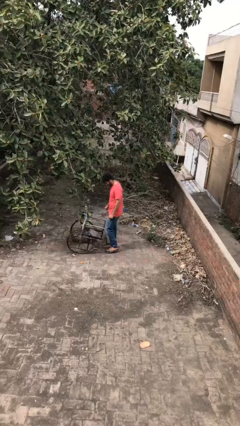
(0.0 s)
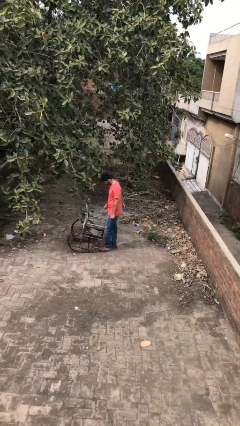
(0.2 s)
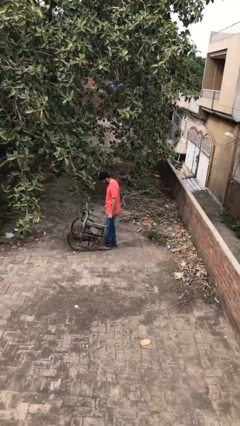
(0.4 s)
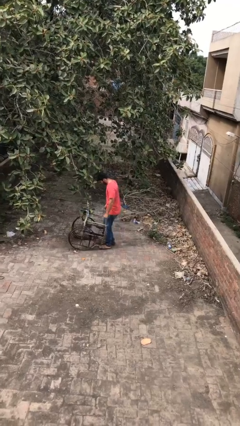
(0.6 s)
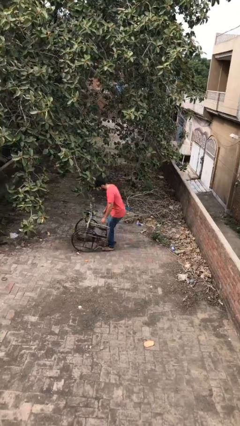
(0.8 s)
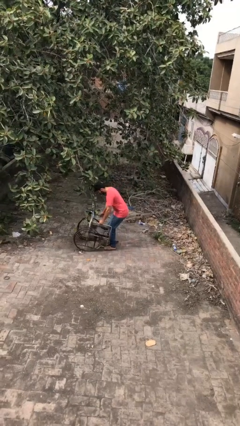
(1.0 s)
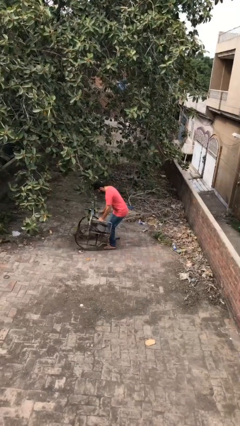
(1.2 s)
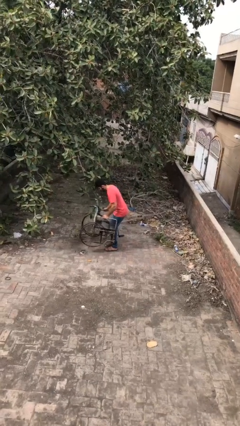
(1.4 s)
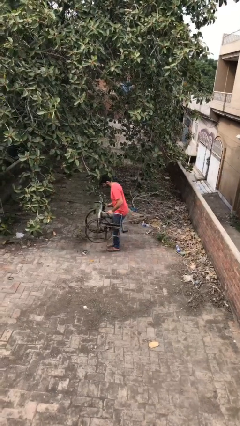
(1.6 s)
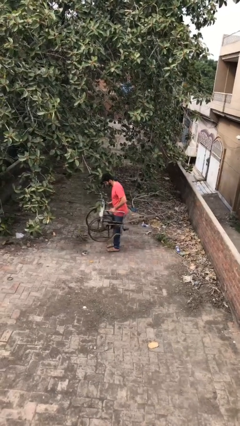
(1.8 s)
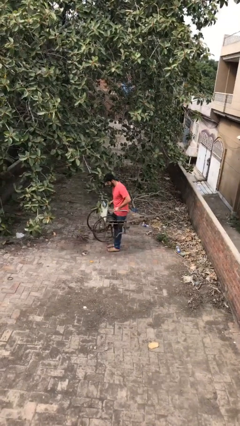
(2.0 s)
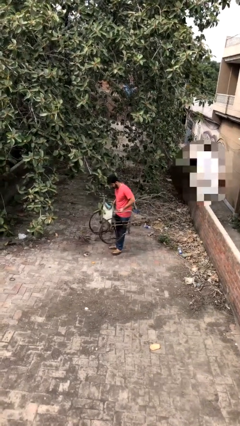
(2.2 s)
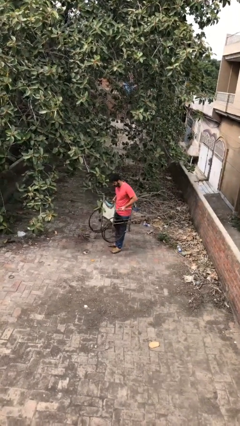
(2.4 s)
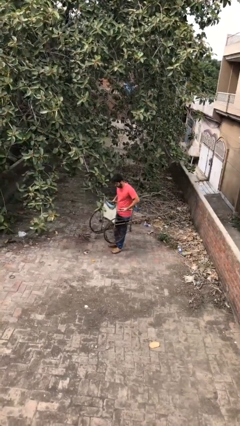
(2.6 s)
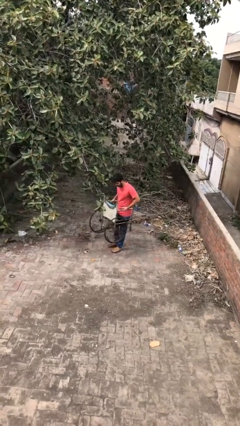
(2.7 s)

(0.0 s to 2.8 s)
person picks up object from floor

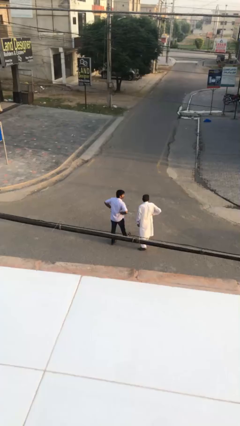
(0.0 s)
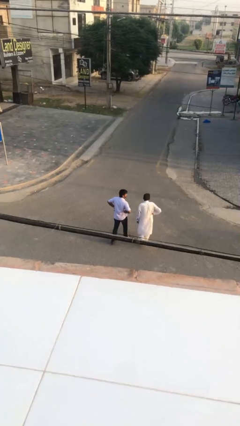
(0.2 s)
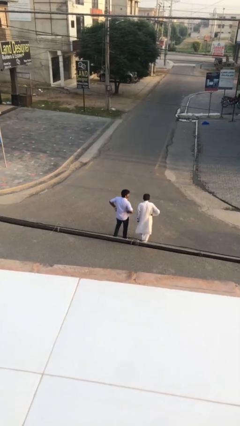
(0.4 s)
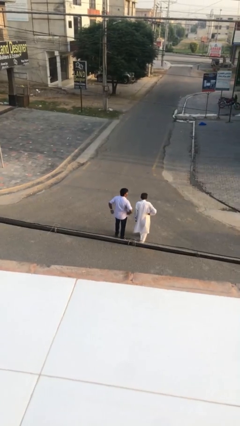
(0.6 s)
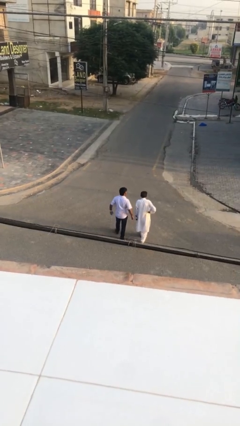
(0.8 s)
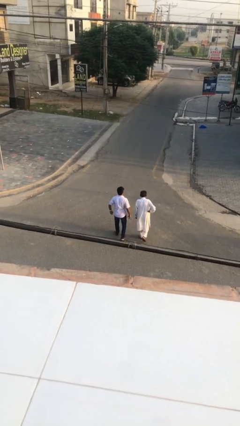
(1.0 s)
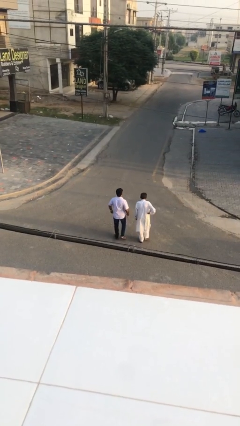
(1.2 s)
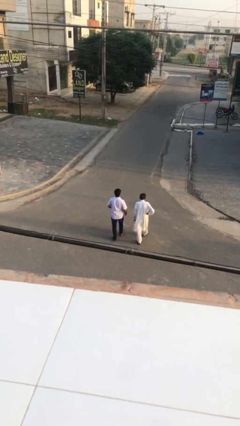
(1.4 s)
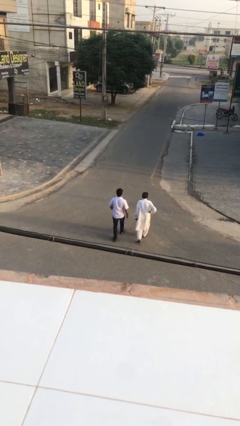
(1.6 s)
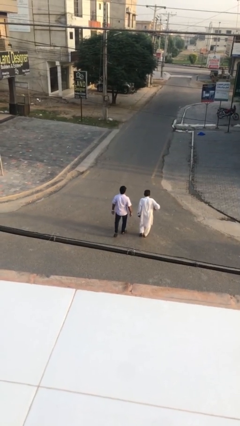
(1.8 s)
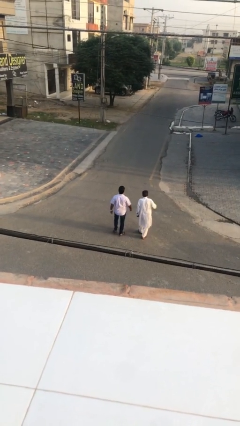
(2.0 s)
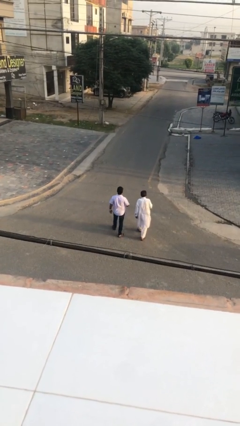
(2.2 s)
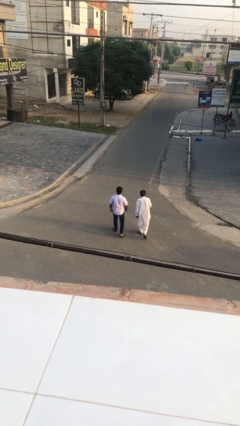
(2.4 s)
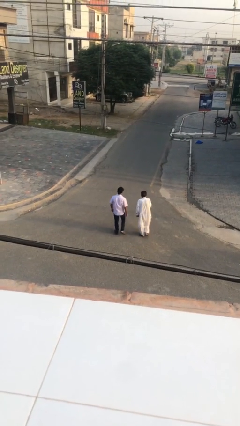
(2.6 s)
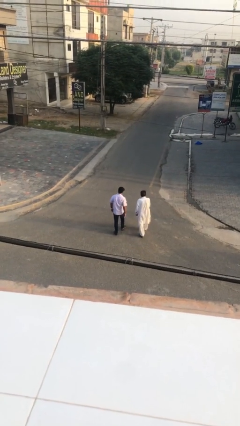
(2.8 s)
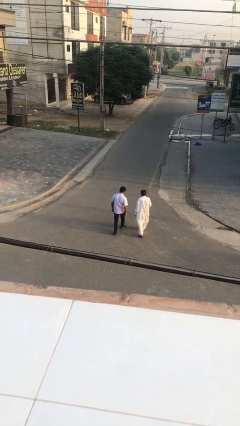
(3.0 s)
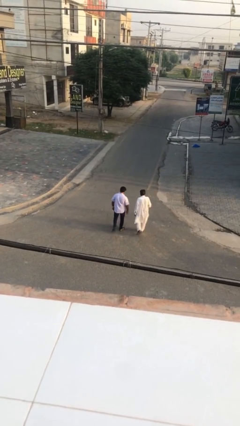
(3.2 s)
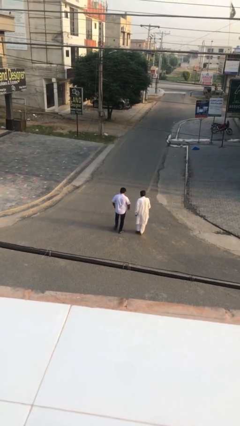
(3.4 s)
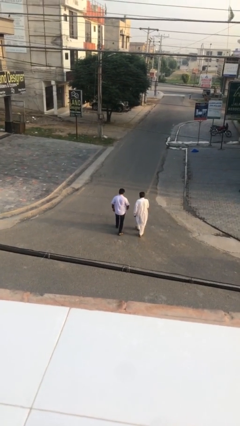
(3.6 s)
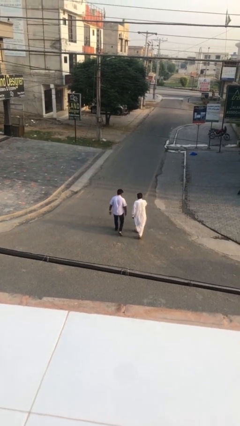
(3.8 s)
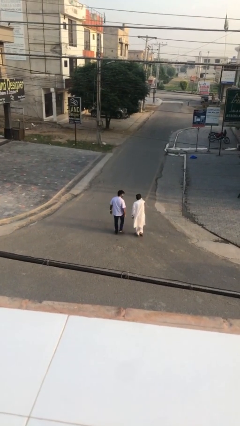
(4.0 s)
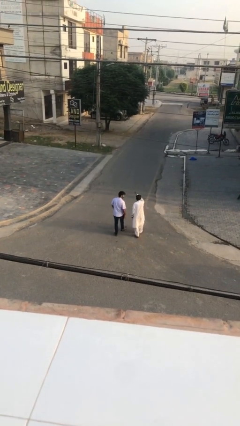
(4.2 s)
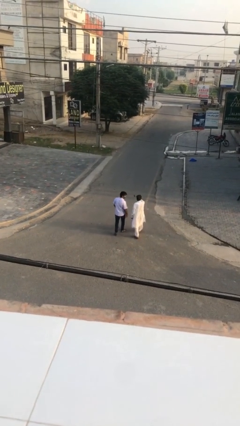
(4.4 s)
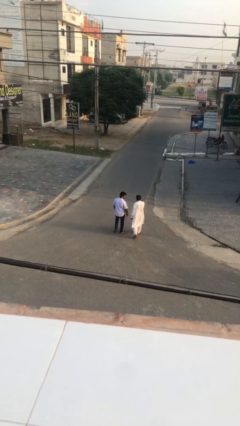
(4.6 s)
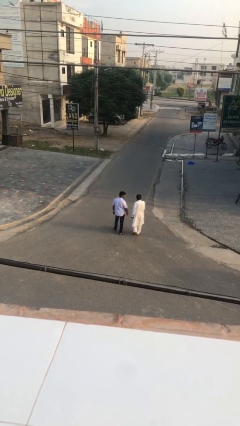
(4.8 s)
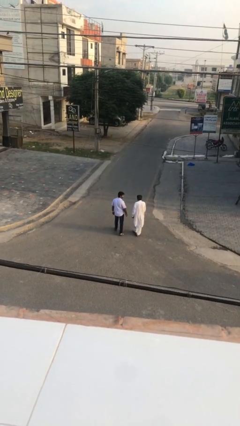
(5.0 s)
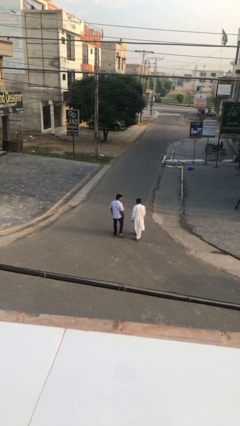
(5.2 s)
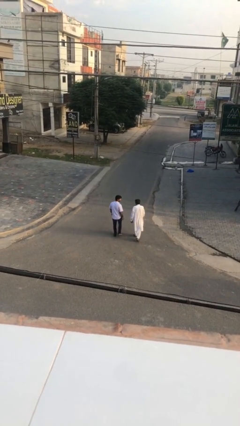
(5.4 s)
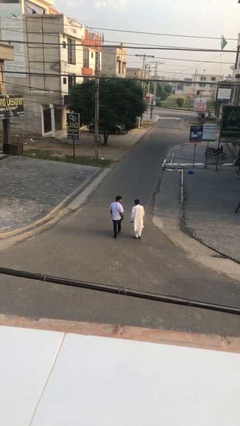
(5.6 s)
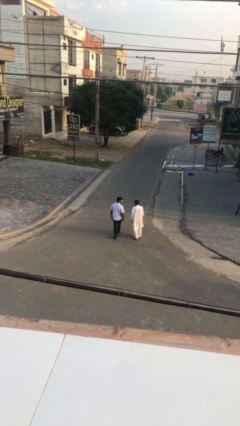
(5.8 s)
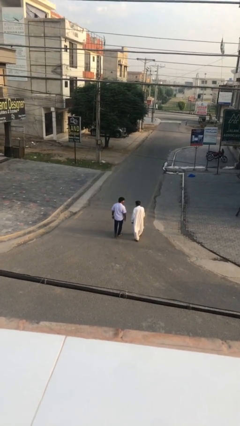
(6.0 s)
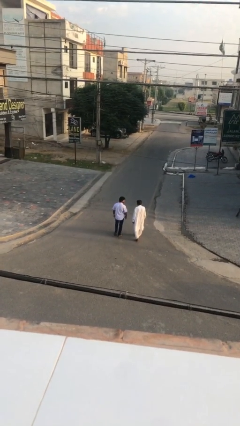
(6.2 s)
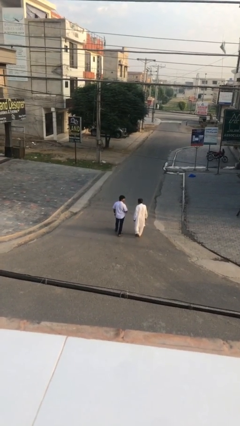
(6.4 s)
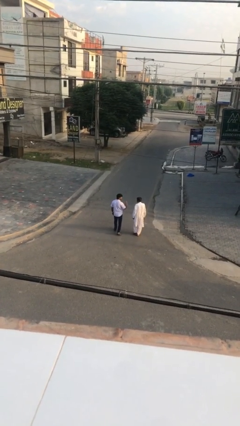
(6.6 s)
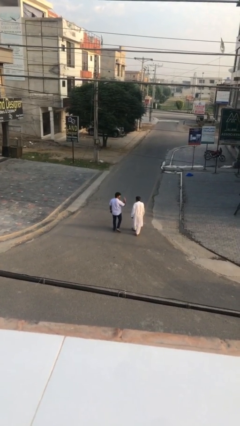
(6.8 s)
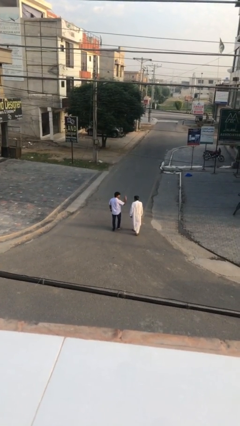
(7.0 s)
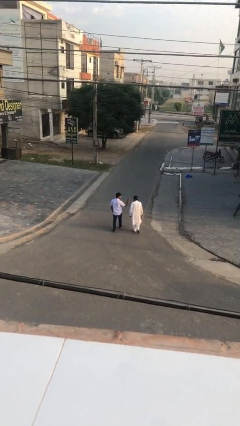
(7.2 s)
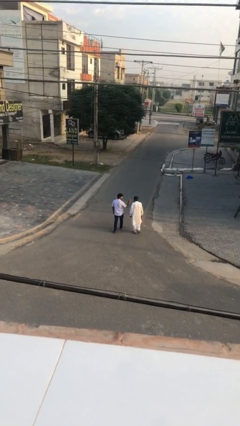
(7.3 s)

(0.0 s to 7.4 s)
person talks to person

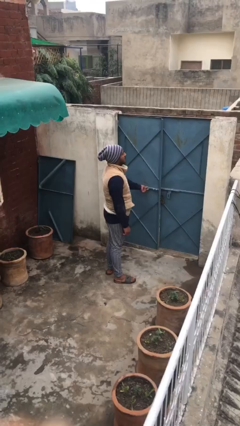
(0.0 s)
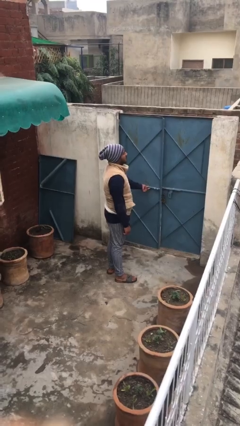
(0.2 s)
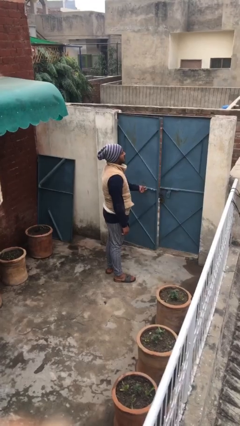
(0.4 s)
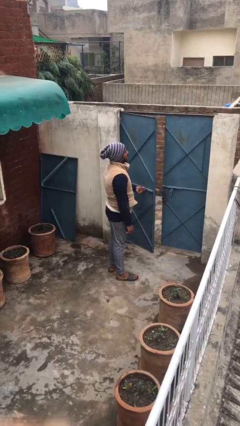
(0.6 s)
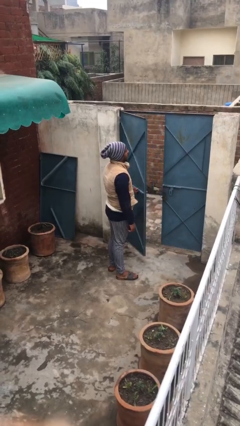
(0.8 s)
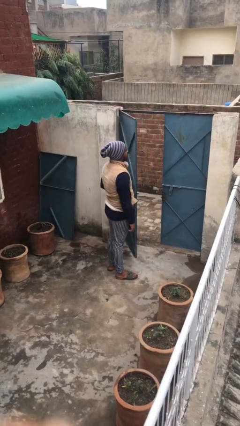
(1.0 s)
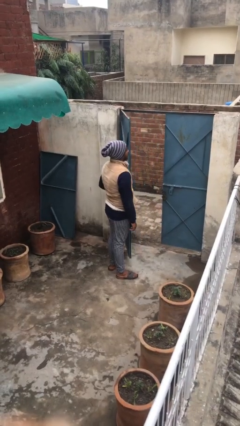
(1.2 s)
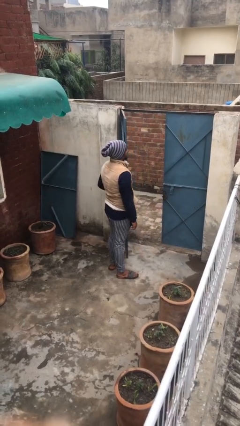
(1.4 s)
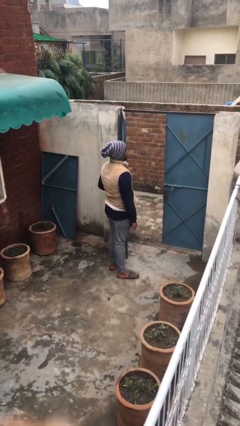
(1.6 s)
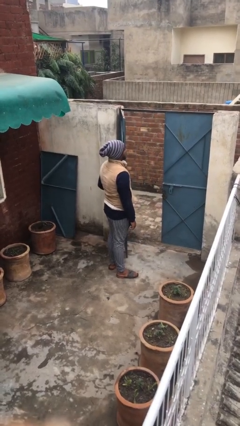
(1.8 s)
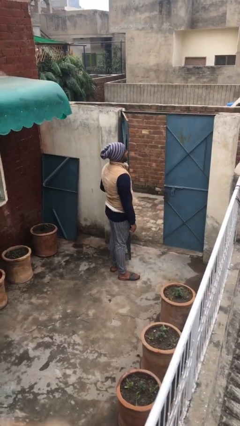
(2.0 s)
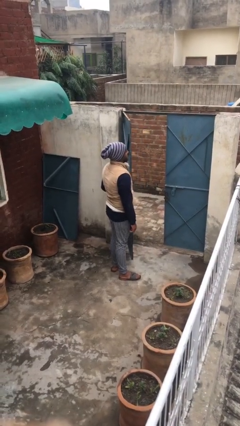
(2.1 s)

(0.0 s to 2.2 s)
person opens facility door

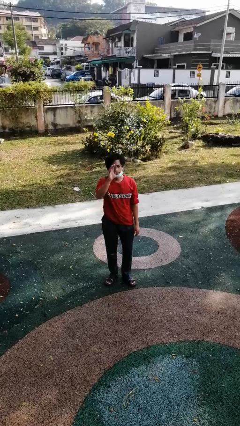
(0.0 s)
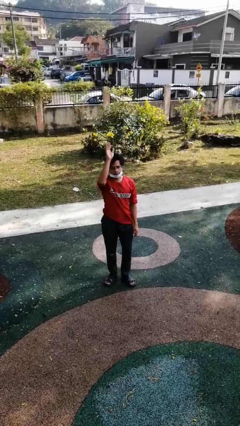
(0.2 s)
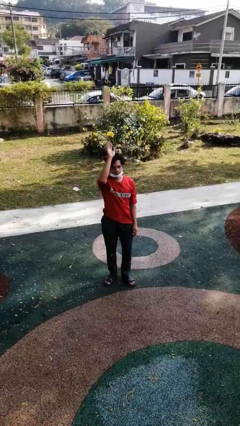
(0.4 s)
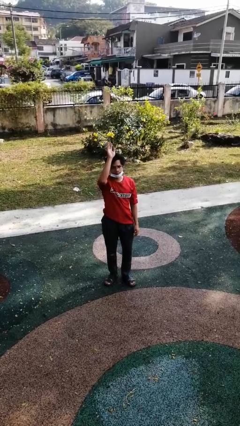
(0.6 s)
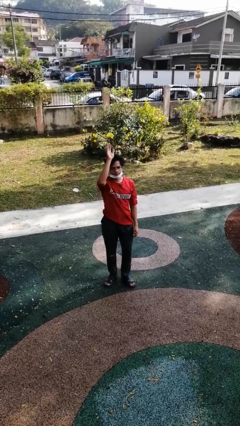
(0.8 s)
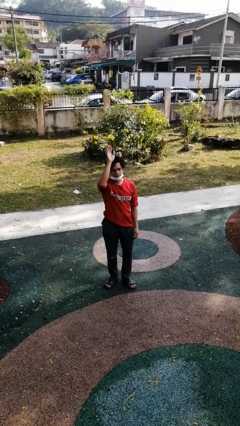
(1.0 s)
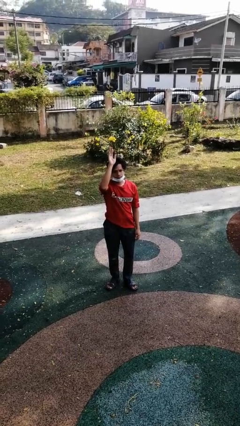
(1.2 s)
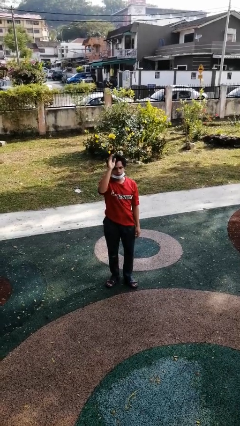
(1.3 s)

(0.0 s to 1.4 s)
person gestures raise hand

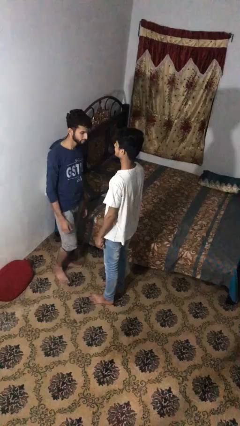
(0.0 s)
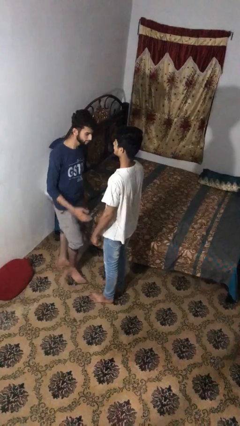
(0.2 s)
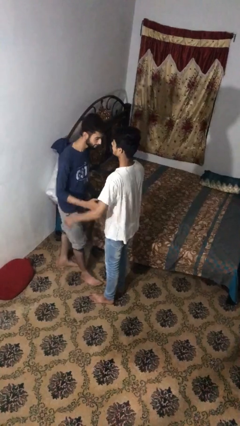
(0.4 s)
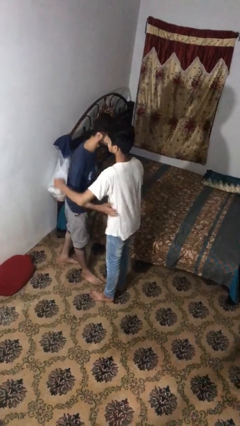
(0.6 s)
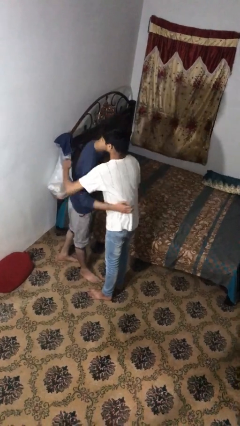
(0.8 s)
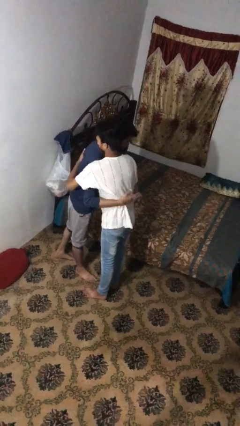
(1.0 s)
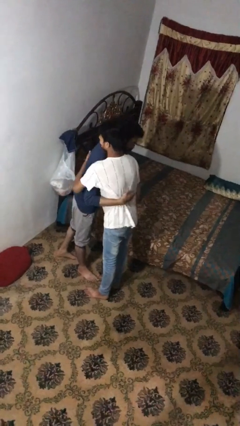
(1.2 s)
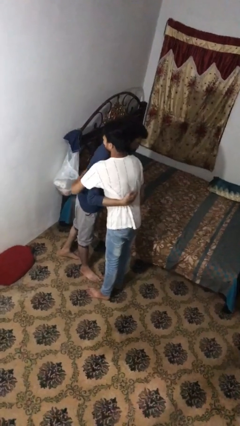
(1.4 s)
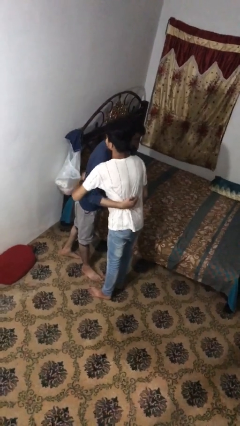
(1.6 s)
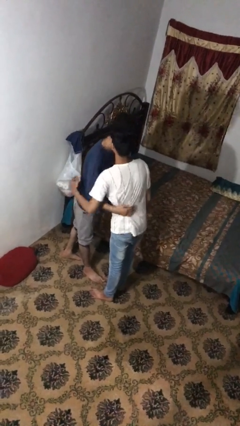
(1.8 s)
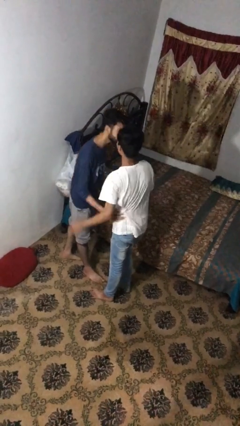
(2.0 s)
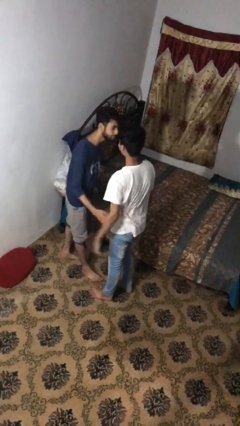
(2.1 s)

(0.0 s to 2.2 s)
person embraces person

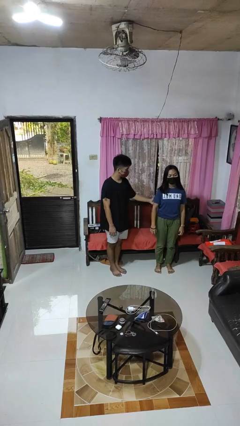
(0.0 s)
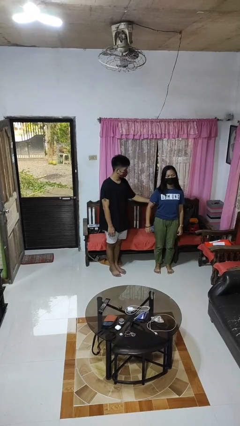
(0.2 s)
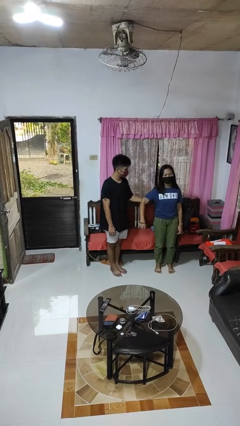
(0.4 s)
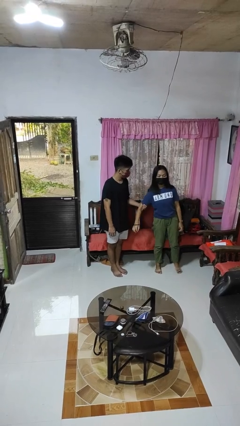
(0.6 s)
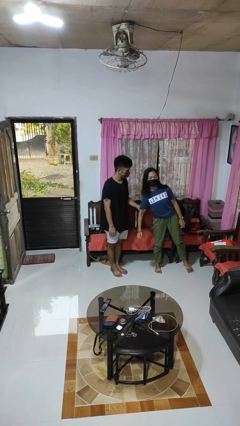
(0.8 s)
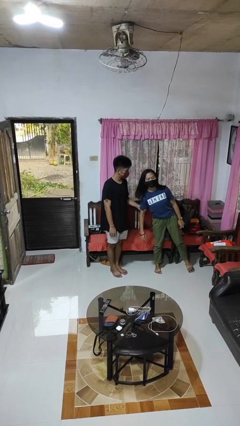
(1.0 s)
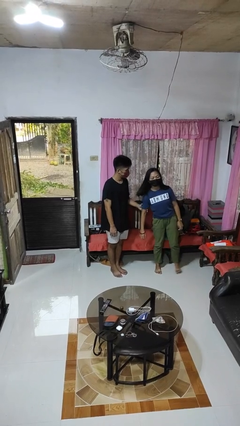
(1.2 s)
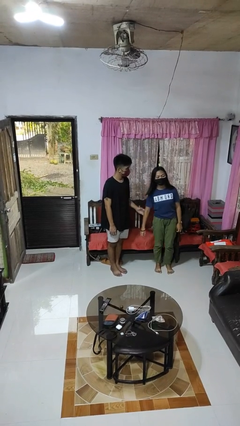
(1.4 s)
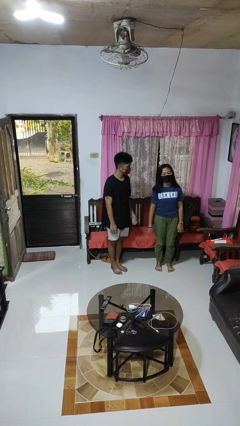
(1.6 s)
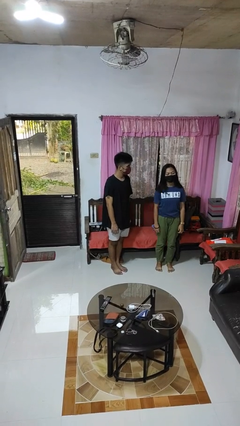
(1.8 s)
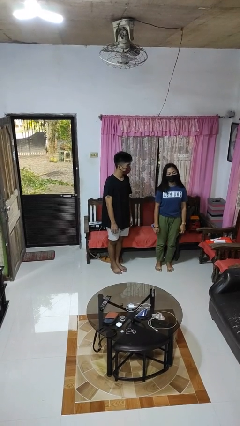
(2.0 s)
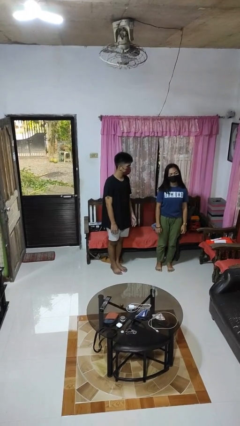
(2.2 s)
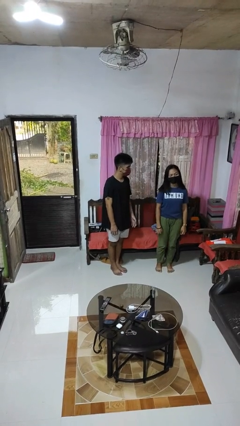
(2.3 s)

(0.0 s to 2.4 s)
person grabs person by bicep
